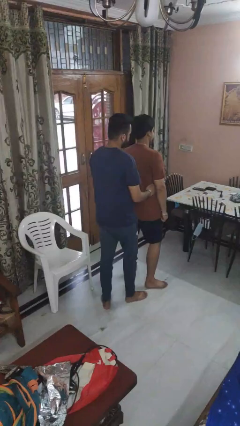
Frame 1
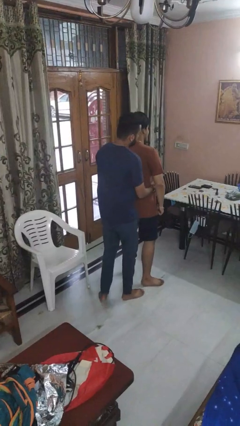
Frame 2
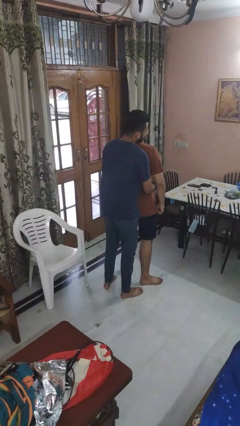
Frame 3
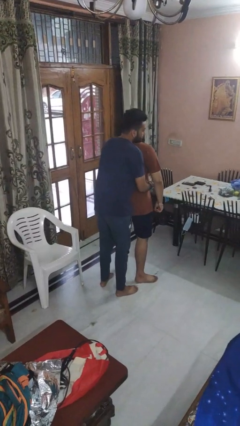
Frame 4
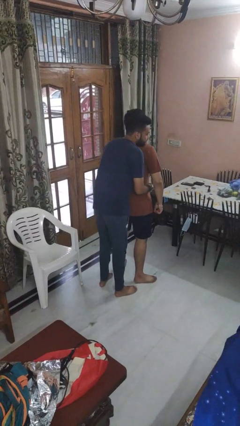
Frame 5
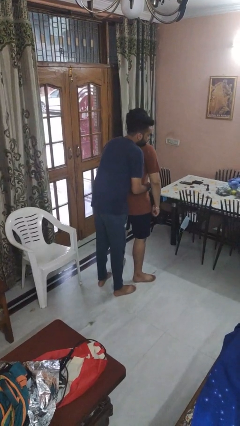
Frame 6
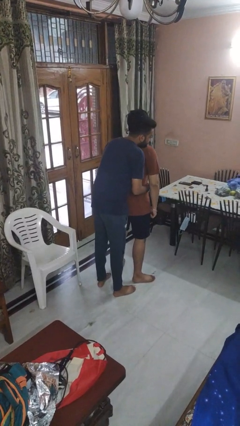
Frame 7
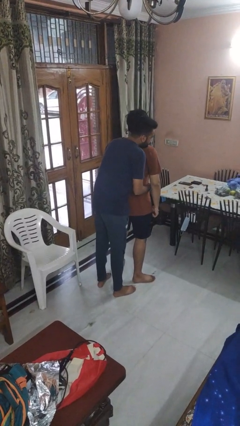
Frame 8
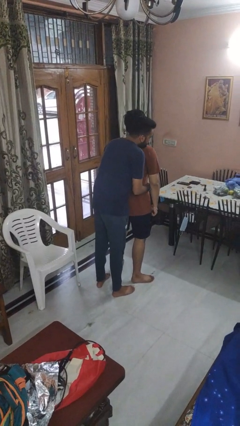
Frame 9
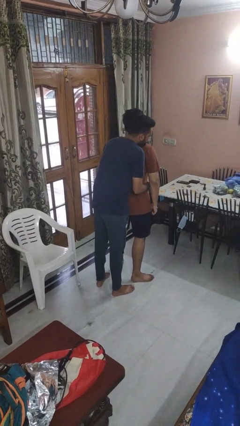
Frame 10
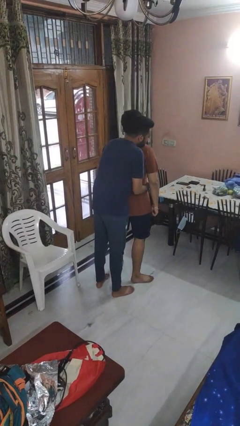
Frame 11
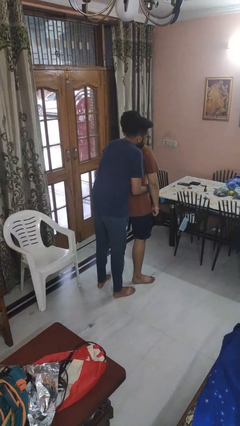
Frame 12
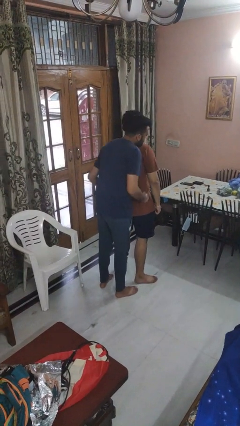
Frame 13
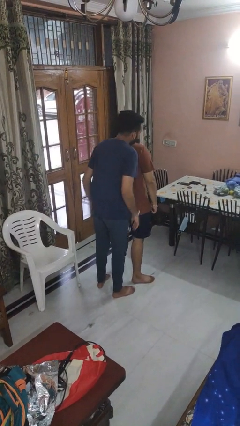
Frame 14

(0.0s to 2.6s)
person hugs person from behind

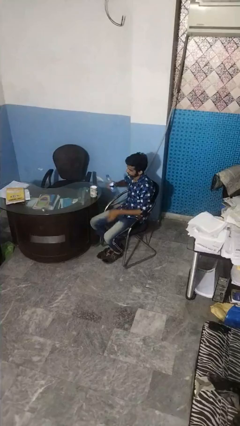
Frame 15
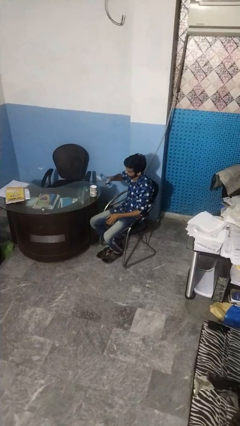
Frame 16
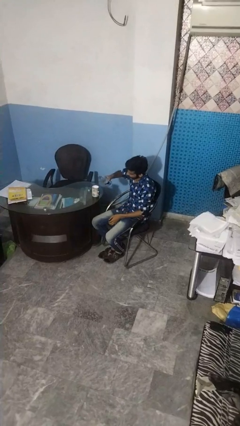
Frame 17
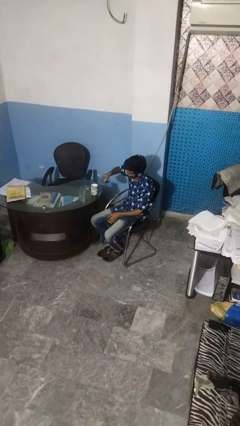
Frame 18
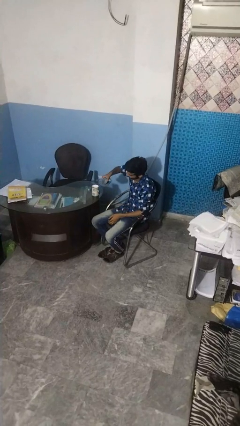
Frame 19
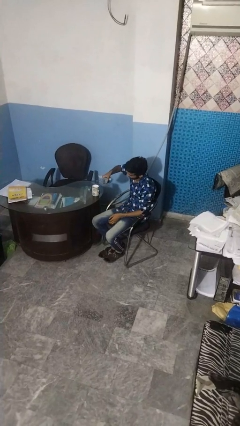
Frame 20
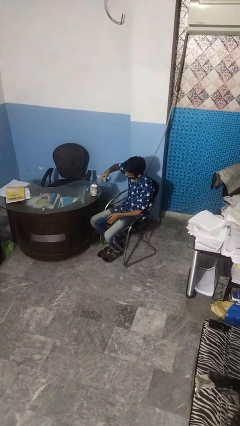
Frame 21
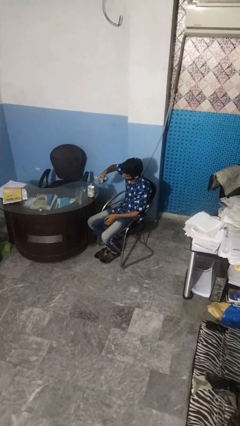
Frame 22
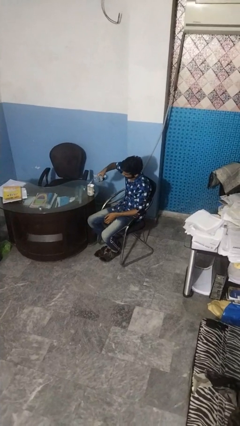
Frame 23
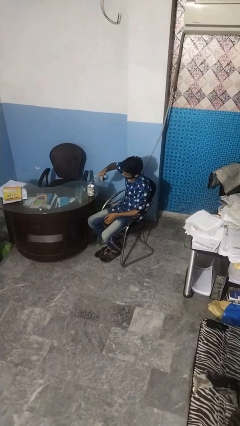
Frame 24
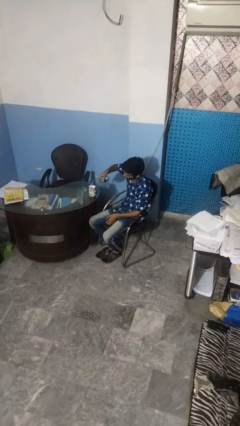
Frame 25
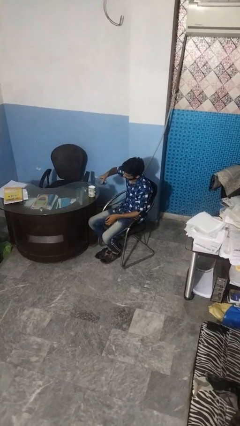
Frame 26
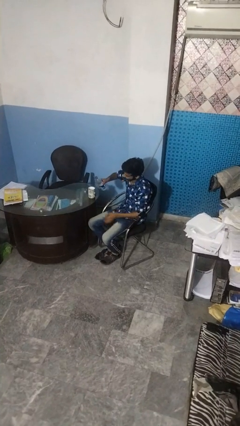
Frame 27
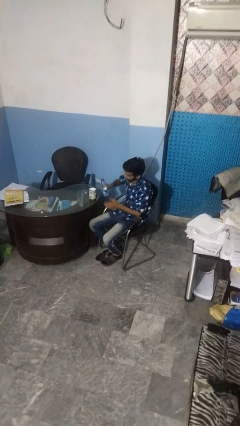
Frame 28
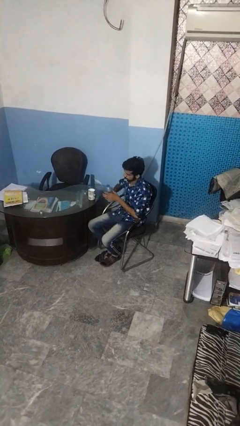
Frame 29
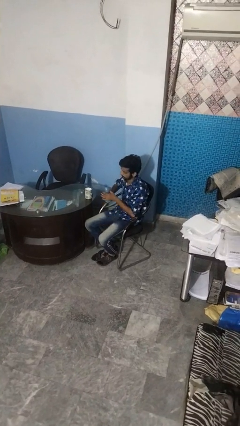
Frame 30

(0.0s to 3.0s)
person pours liquid into cup

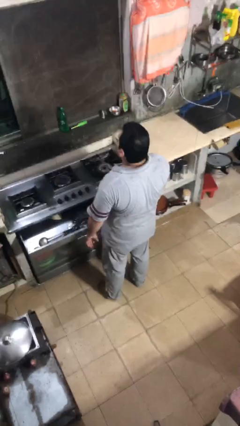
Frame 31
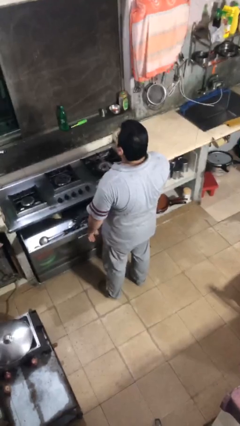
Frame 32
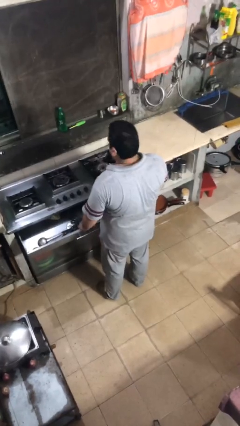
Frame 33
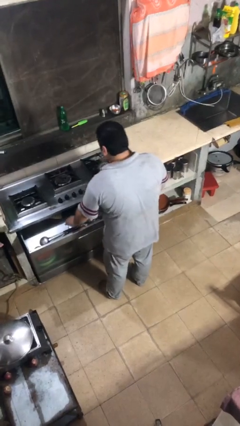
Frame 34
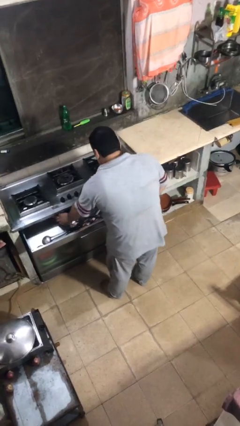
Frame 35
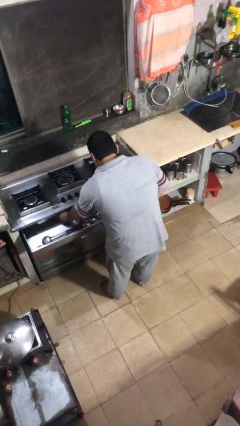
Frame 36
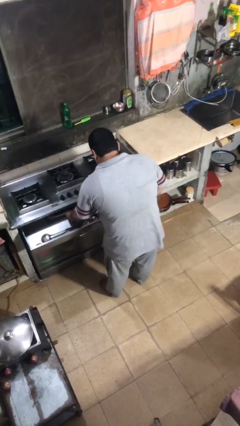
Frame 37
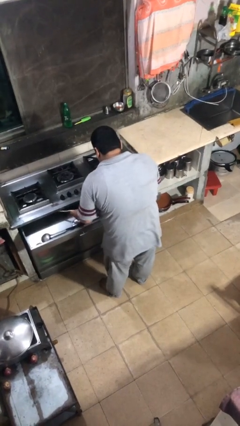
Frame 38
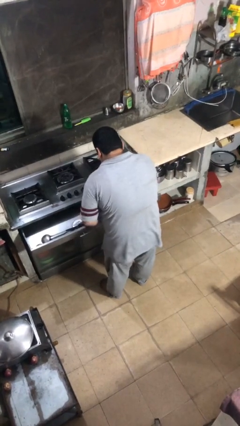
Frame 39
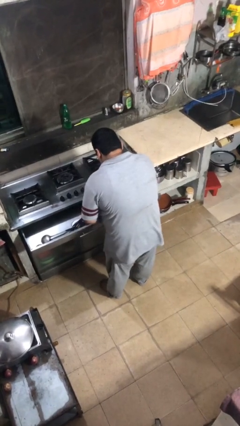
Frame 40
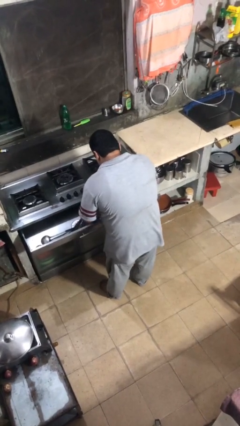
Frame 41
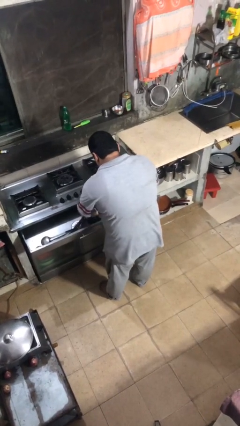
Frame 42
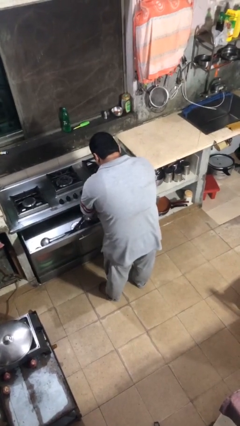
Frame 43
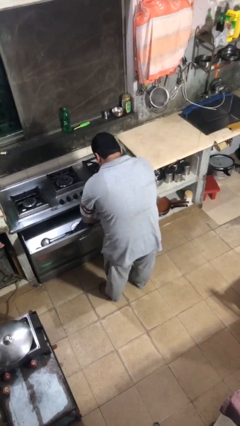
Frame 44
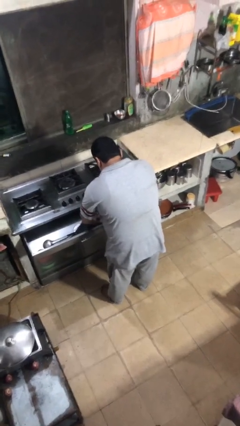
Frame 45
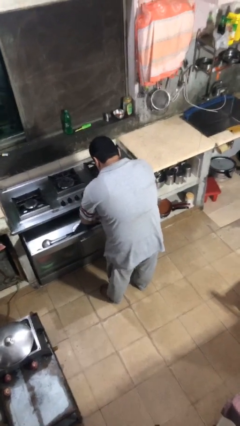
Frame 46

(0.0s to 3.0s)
person searches in kitchen drawer

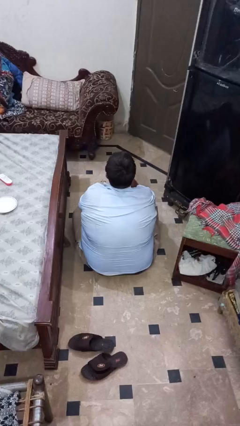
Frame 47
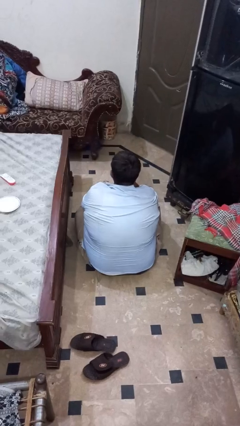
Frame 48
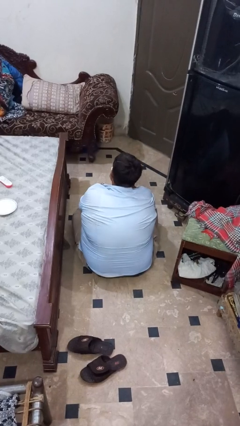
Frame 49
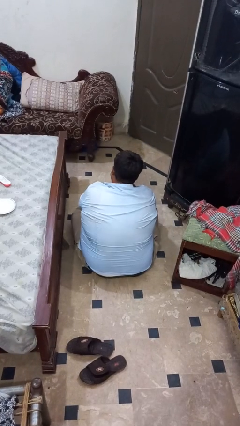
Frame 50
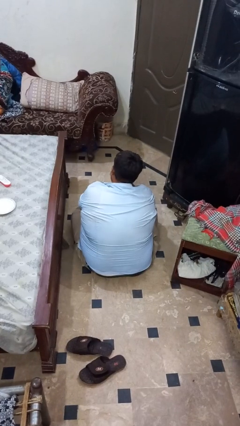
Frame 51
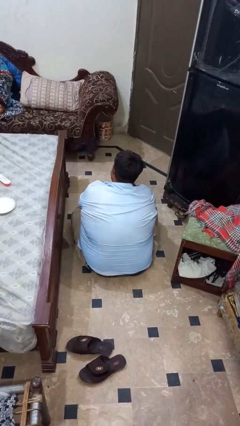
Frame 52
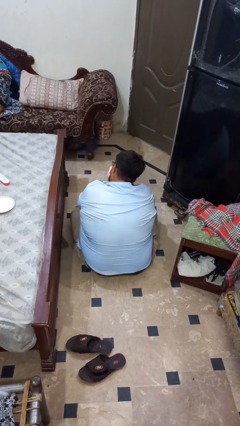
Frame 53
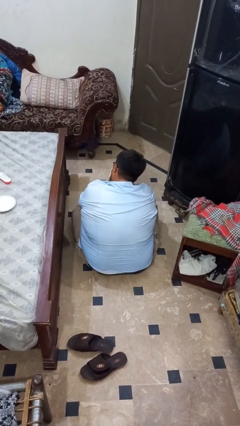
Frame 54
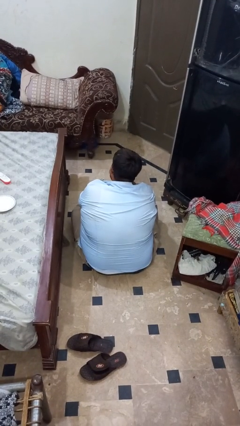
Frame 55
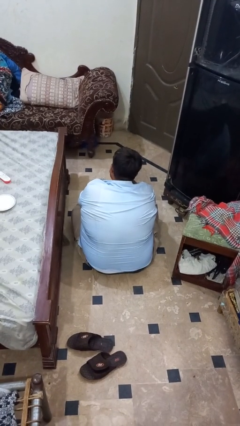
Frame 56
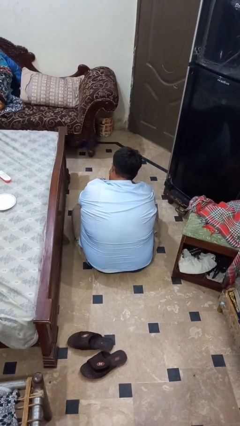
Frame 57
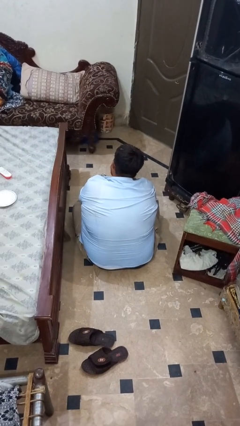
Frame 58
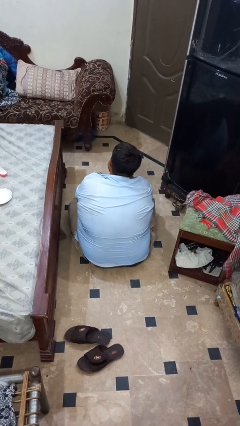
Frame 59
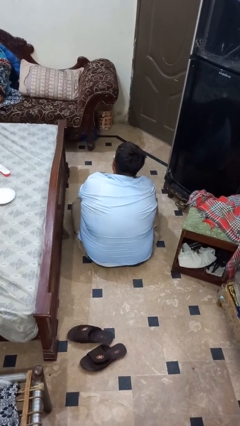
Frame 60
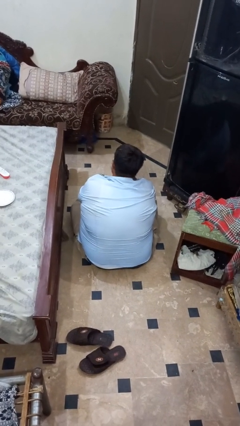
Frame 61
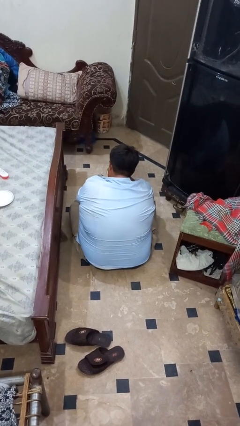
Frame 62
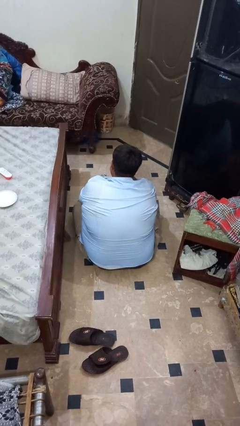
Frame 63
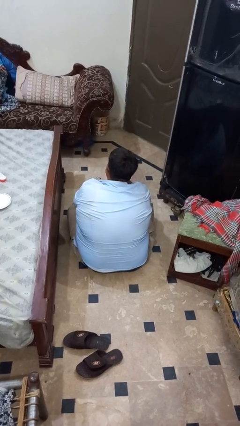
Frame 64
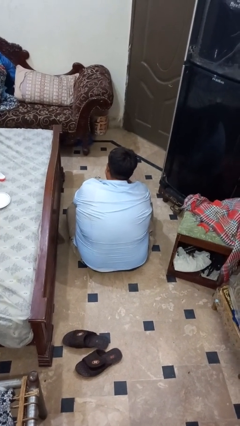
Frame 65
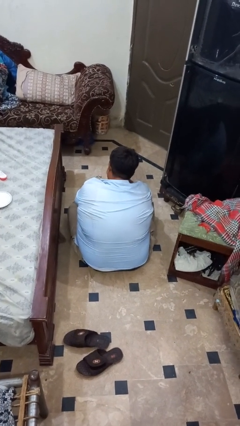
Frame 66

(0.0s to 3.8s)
person blows nose

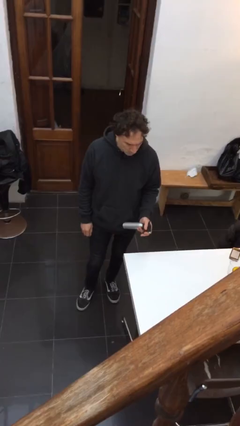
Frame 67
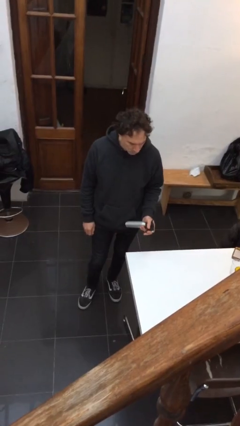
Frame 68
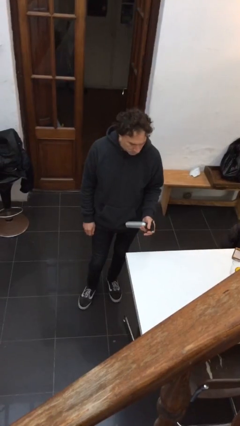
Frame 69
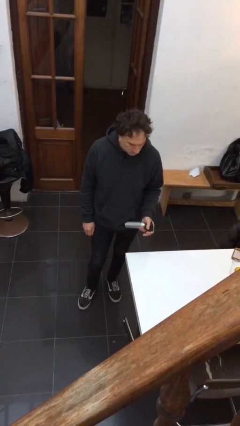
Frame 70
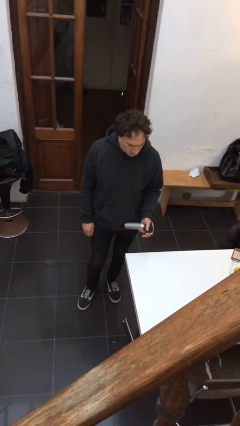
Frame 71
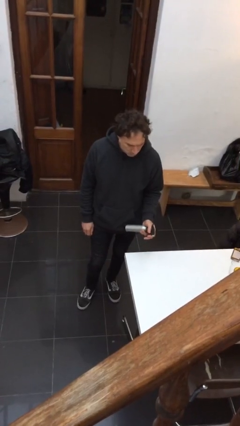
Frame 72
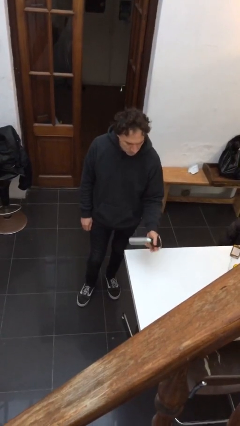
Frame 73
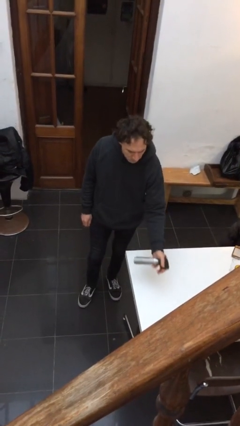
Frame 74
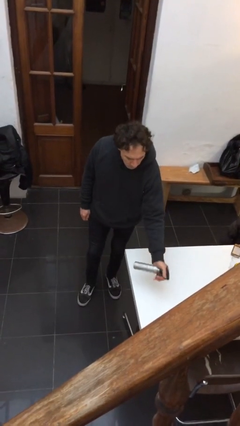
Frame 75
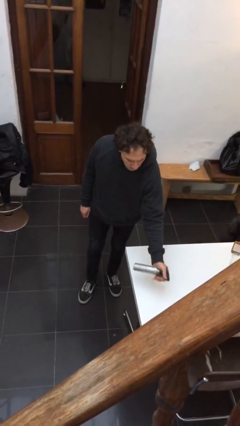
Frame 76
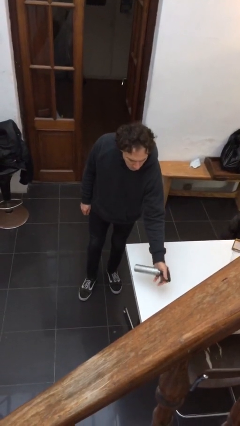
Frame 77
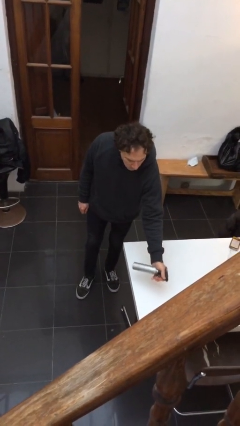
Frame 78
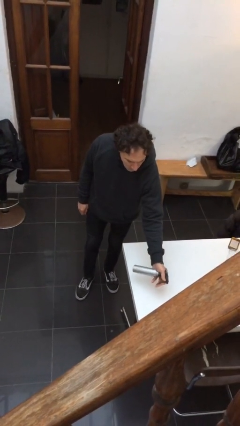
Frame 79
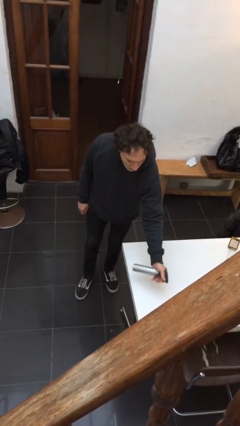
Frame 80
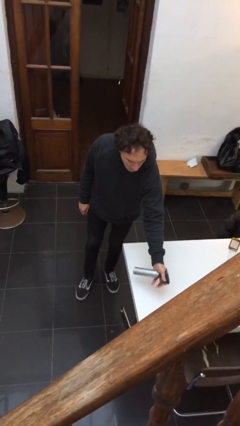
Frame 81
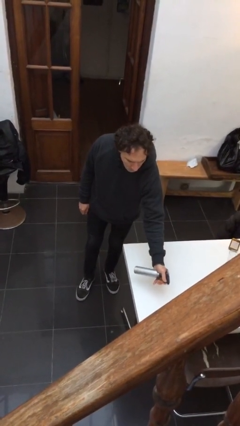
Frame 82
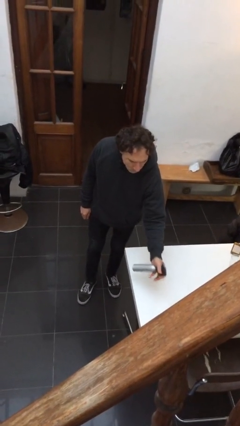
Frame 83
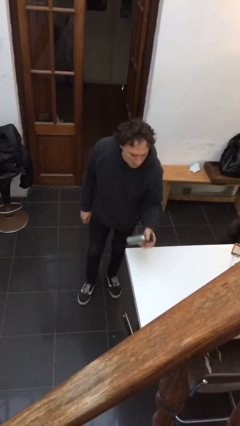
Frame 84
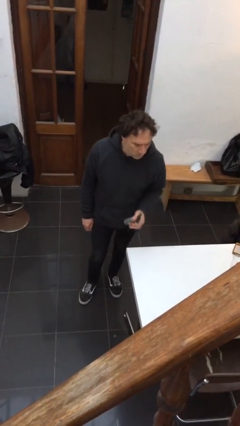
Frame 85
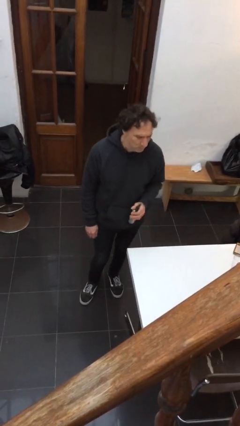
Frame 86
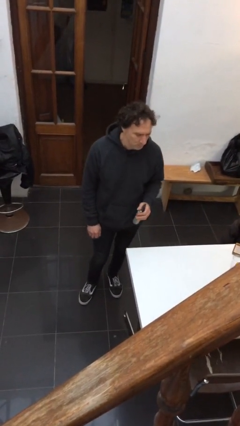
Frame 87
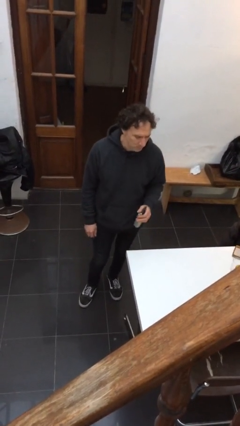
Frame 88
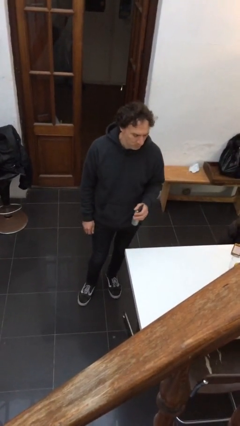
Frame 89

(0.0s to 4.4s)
person sprays from bottle

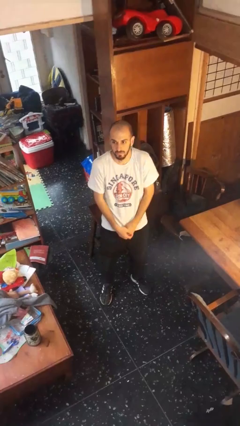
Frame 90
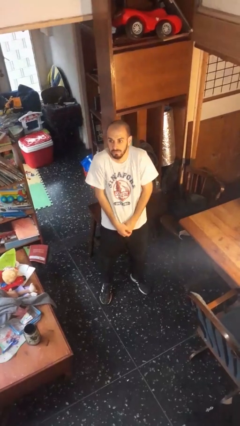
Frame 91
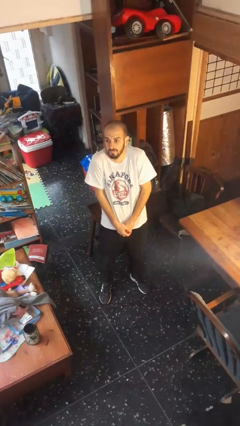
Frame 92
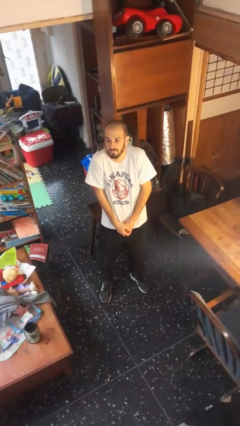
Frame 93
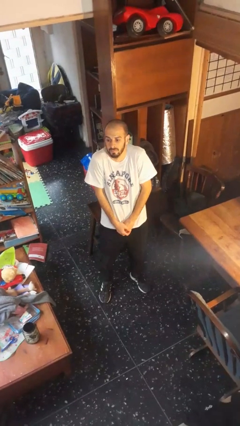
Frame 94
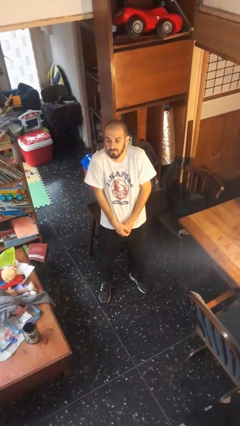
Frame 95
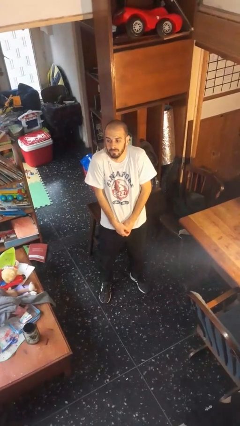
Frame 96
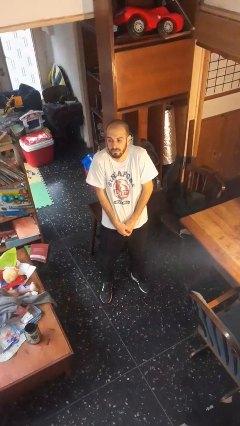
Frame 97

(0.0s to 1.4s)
person shrugs
